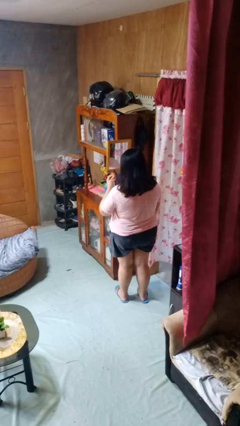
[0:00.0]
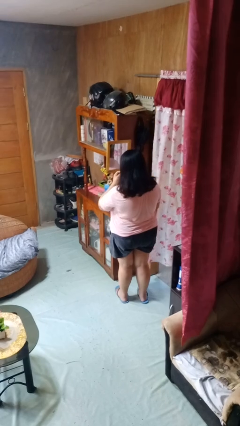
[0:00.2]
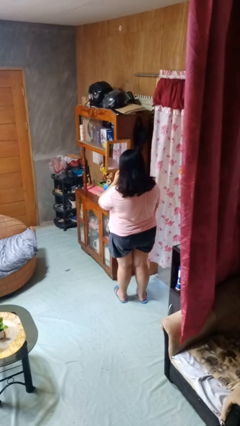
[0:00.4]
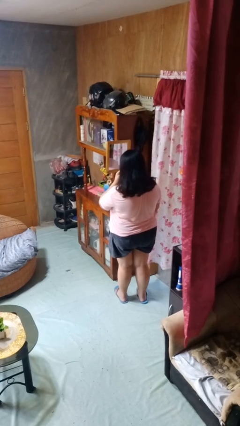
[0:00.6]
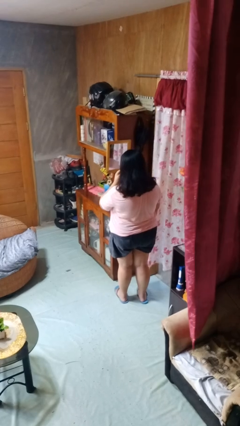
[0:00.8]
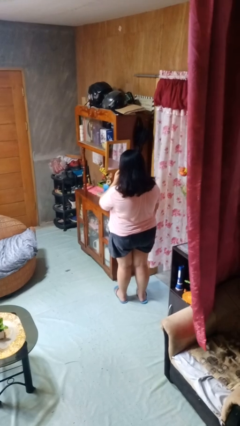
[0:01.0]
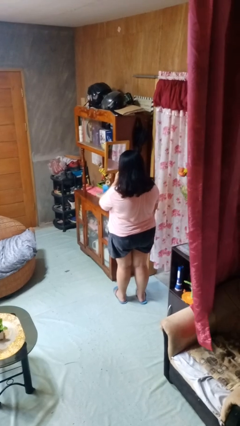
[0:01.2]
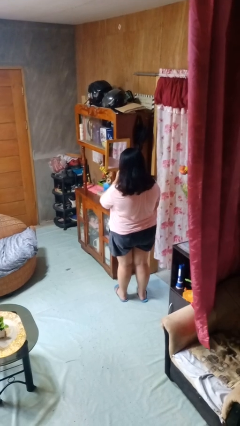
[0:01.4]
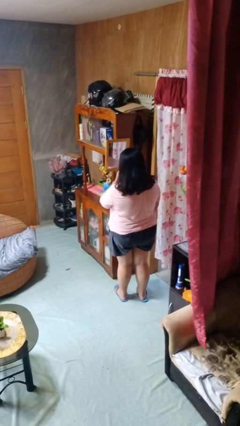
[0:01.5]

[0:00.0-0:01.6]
person applies lip makeup

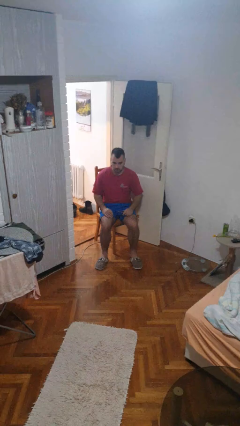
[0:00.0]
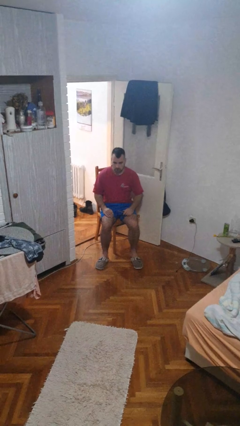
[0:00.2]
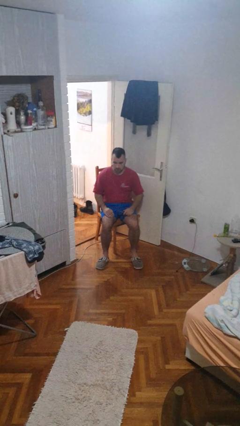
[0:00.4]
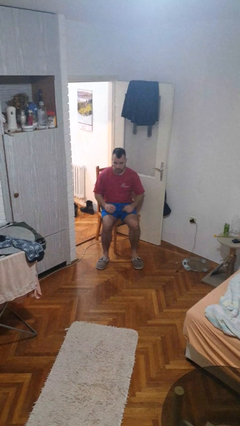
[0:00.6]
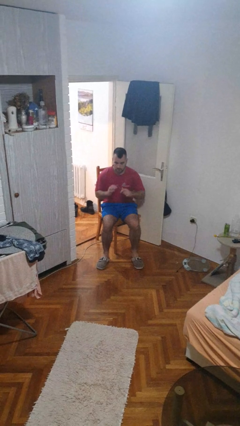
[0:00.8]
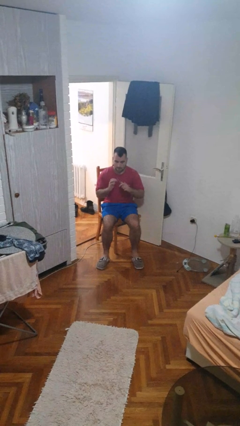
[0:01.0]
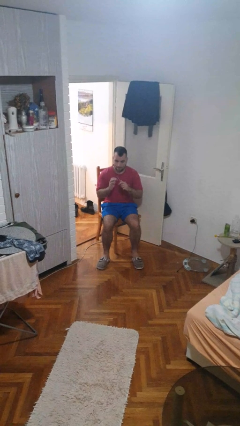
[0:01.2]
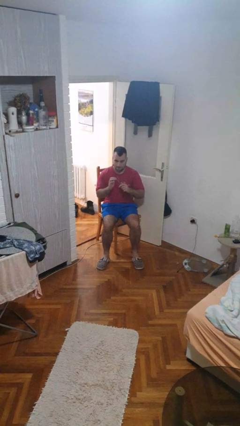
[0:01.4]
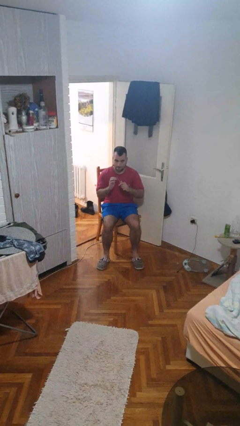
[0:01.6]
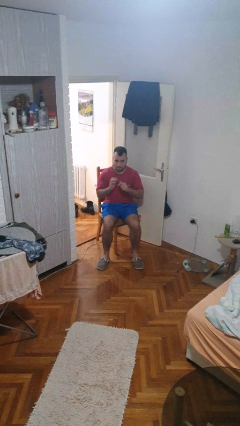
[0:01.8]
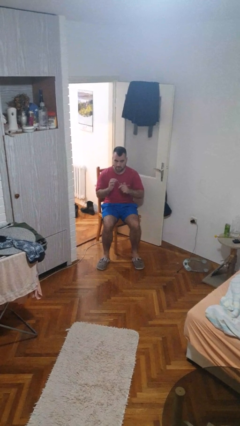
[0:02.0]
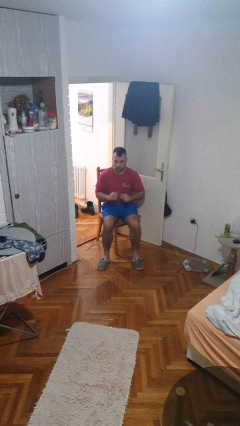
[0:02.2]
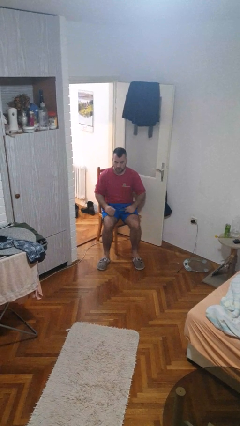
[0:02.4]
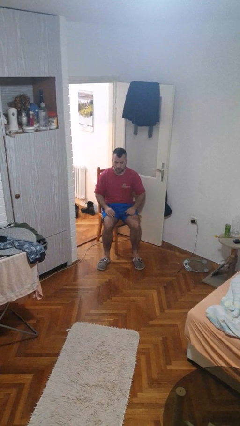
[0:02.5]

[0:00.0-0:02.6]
person files fingernails

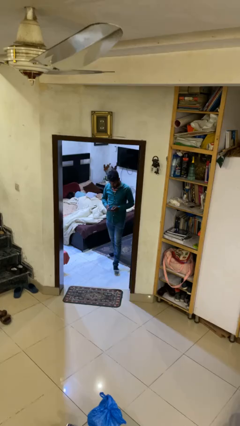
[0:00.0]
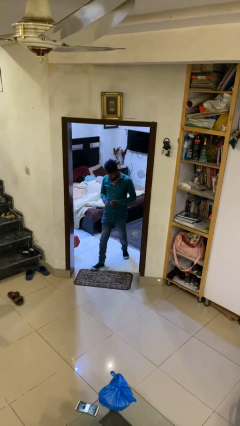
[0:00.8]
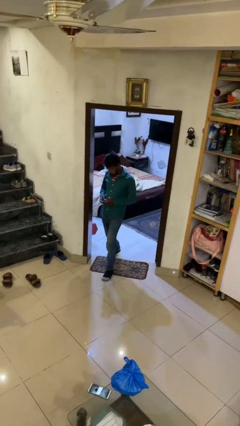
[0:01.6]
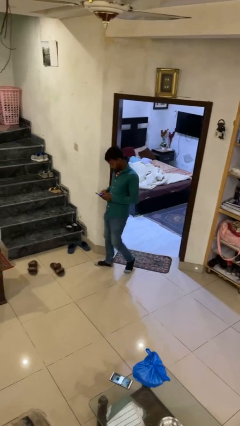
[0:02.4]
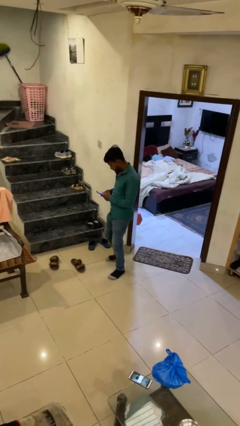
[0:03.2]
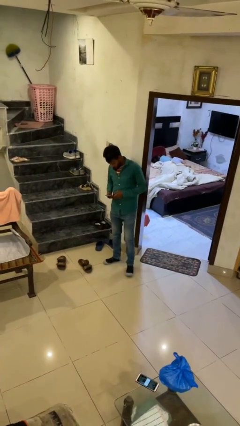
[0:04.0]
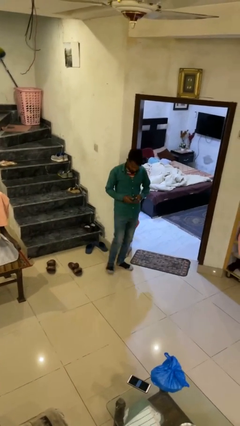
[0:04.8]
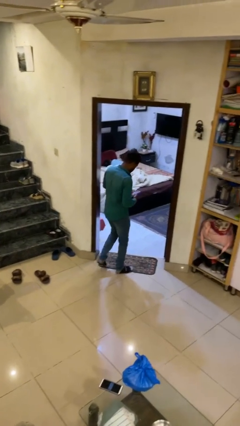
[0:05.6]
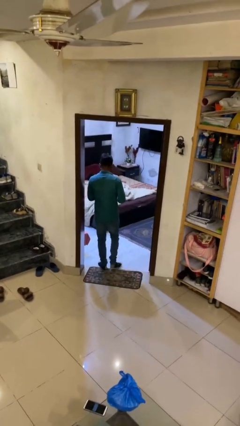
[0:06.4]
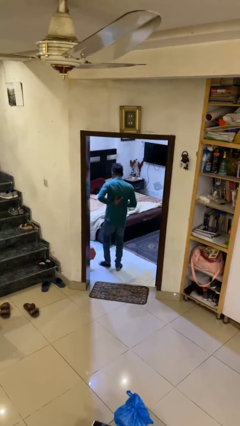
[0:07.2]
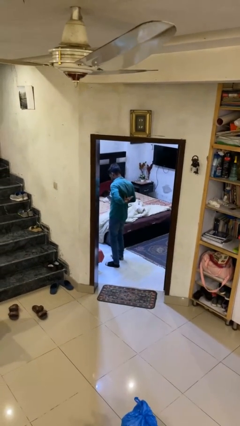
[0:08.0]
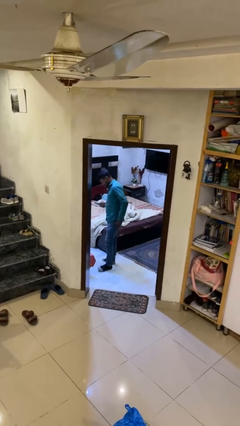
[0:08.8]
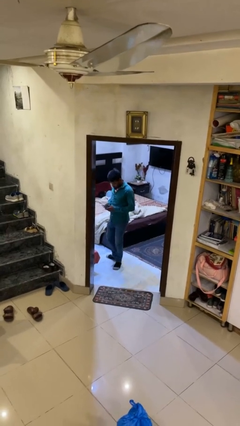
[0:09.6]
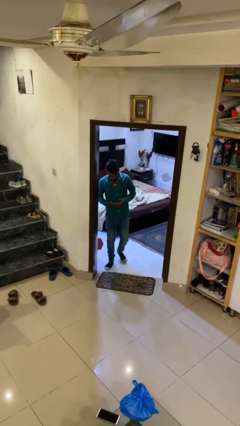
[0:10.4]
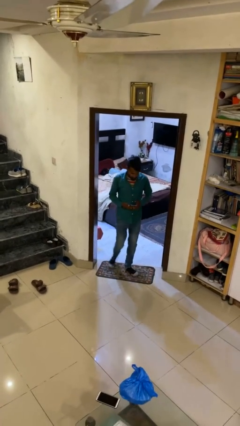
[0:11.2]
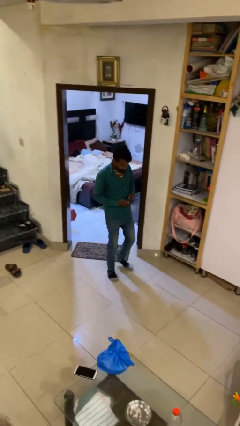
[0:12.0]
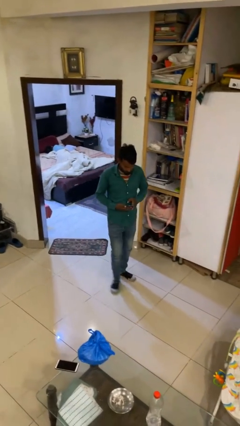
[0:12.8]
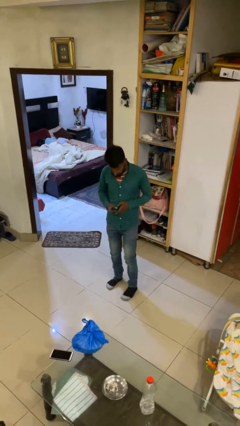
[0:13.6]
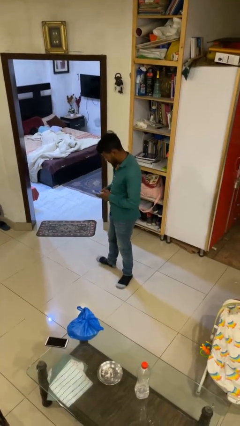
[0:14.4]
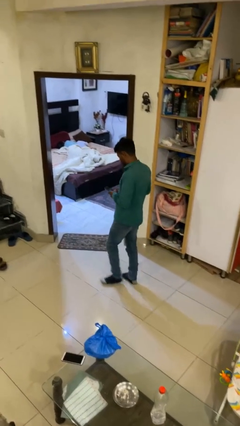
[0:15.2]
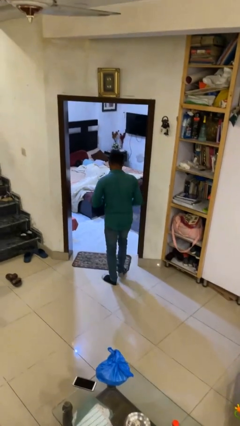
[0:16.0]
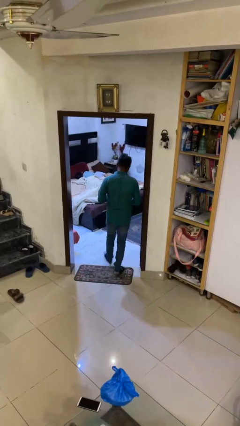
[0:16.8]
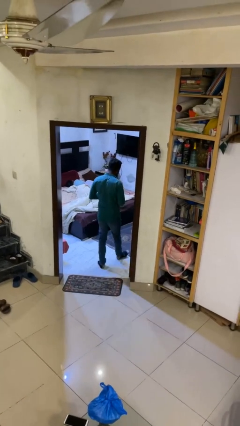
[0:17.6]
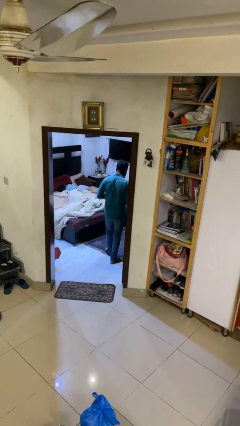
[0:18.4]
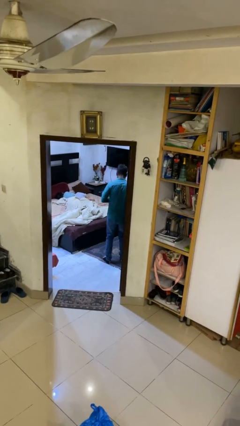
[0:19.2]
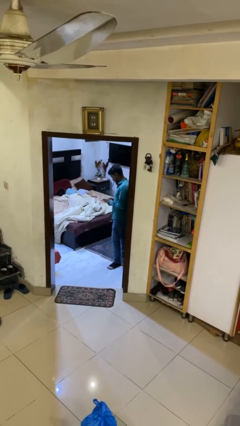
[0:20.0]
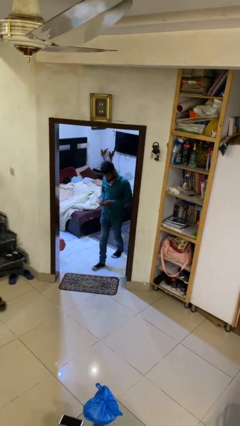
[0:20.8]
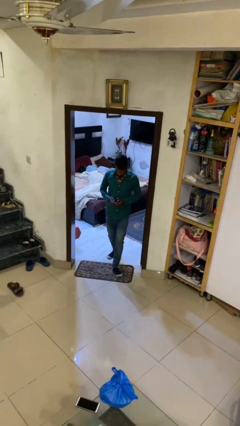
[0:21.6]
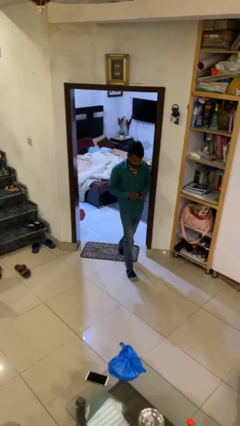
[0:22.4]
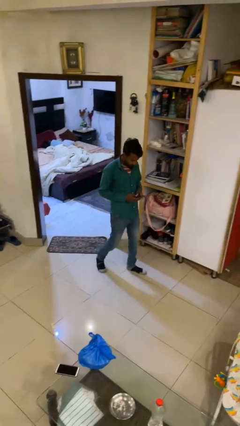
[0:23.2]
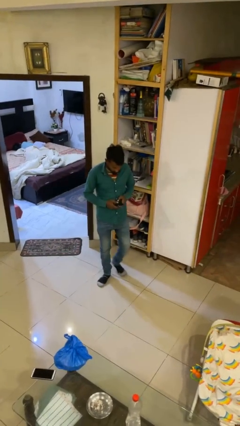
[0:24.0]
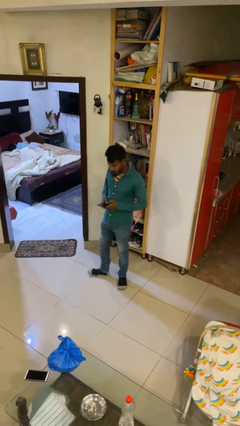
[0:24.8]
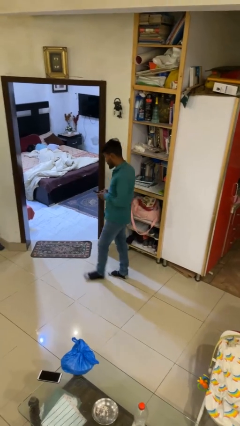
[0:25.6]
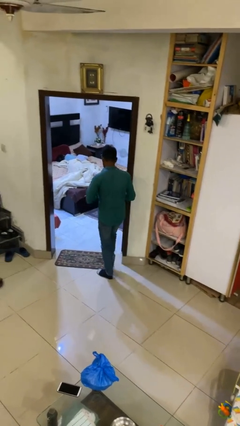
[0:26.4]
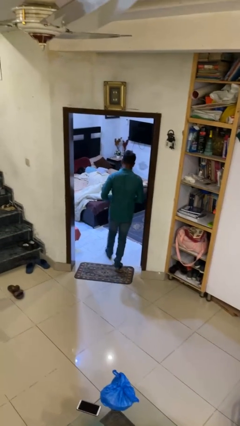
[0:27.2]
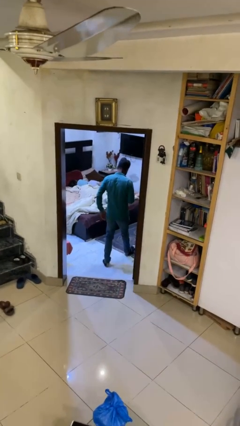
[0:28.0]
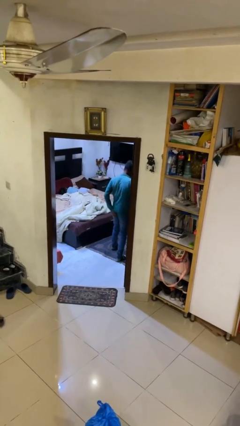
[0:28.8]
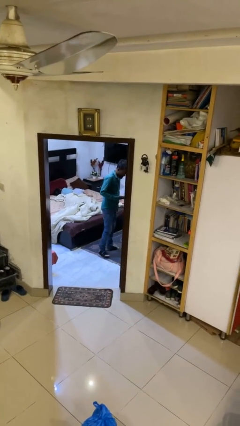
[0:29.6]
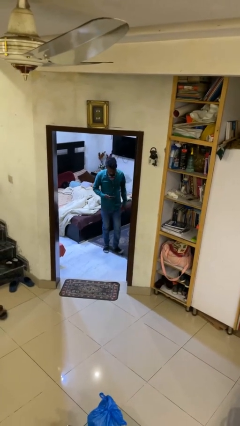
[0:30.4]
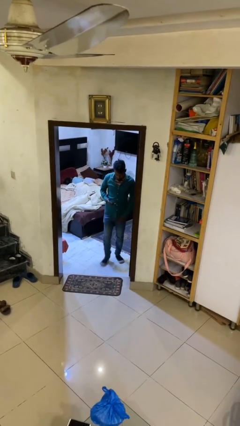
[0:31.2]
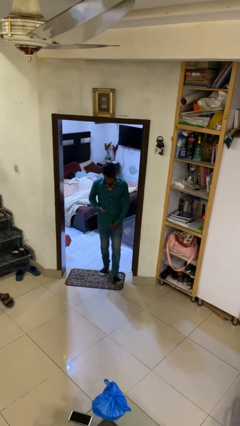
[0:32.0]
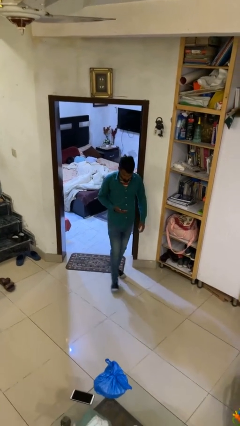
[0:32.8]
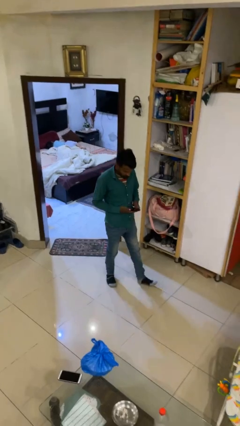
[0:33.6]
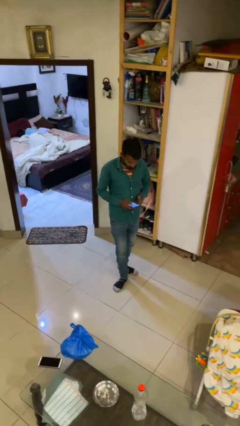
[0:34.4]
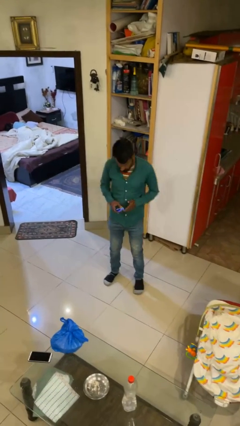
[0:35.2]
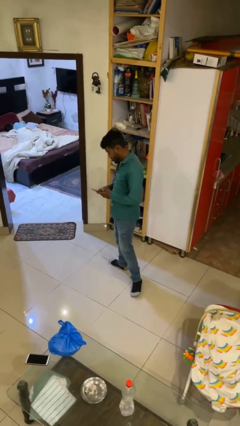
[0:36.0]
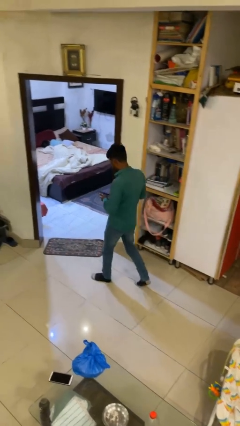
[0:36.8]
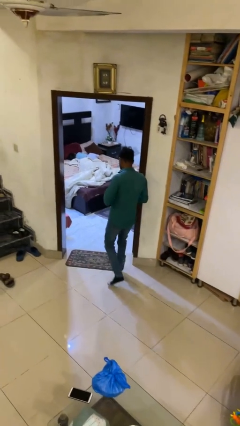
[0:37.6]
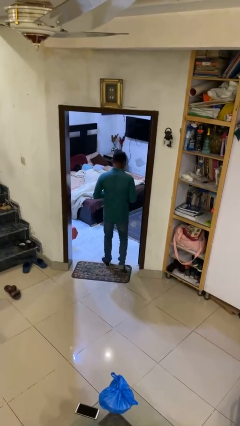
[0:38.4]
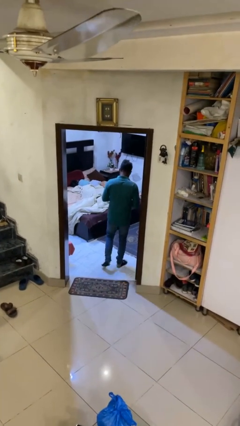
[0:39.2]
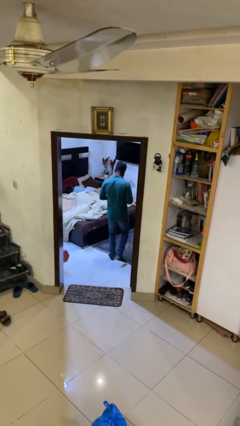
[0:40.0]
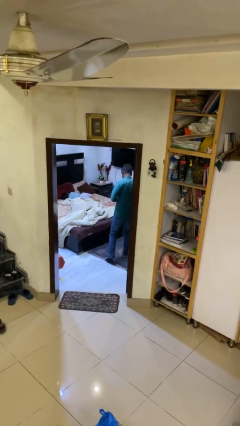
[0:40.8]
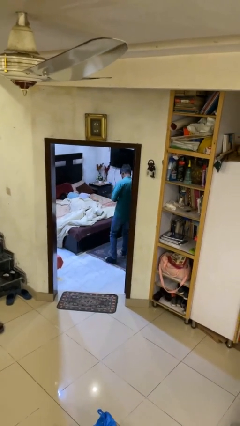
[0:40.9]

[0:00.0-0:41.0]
person texts on phone

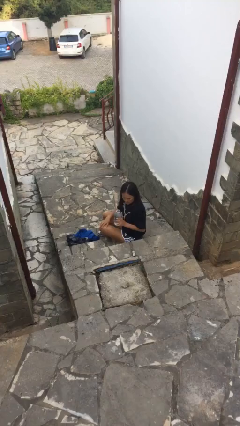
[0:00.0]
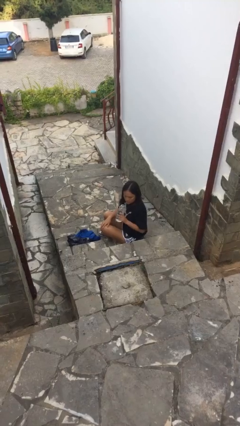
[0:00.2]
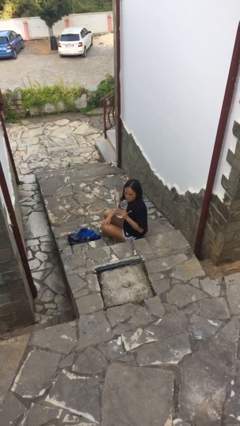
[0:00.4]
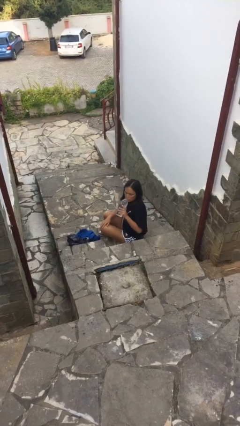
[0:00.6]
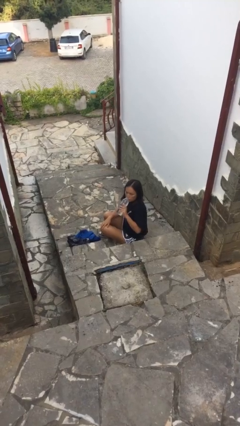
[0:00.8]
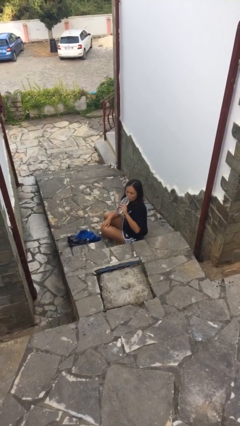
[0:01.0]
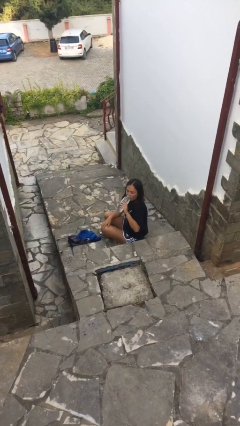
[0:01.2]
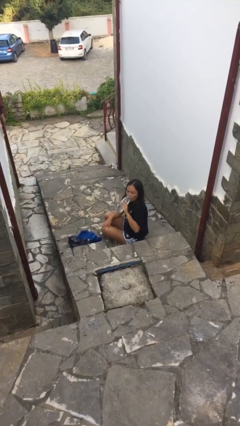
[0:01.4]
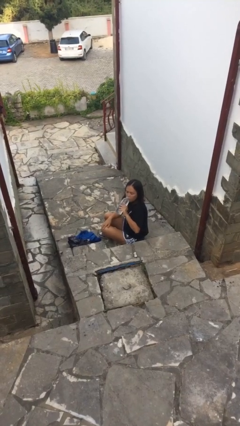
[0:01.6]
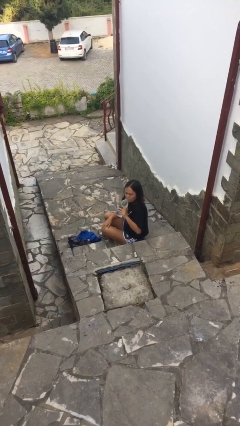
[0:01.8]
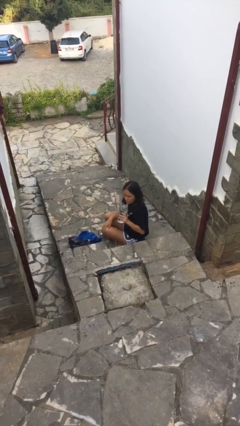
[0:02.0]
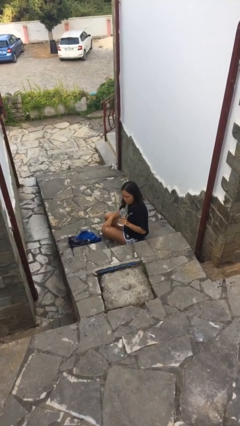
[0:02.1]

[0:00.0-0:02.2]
person drinks from bottle

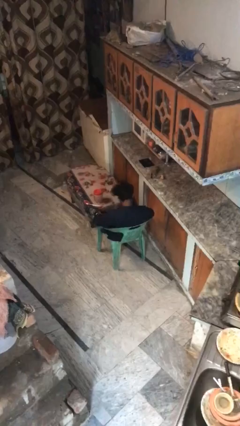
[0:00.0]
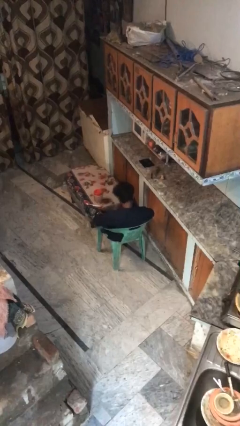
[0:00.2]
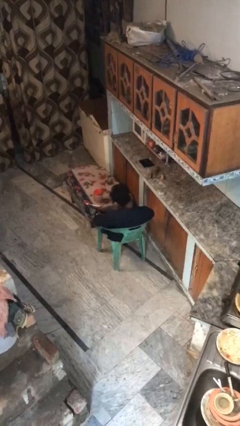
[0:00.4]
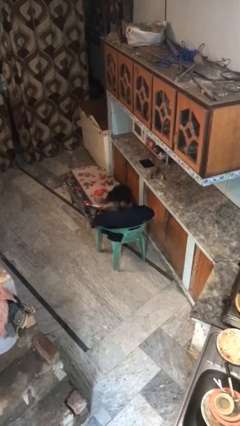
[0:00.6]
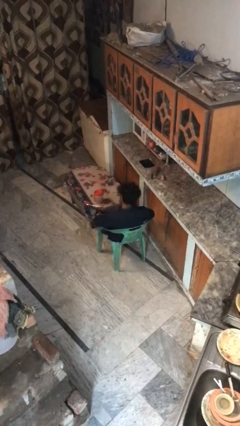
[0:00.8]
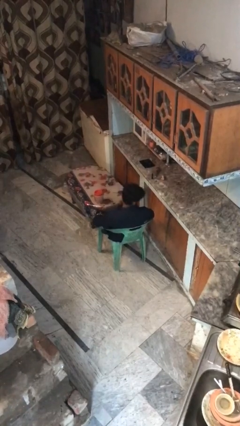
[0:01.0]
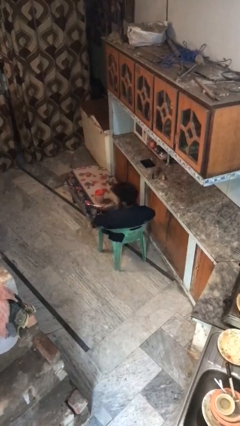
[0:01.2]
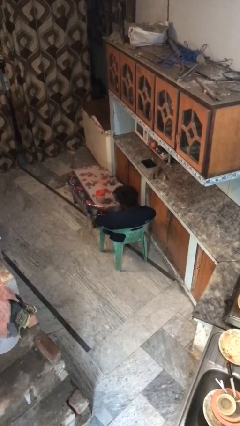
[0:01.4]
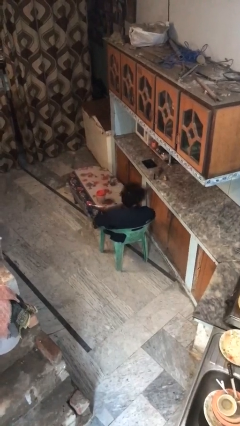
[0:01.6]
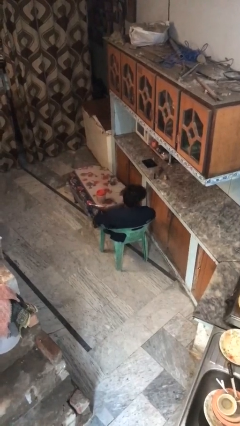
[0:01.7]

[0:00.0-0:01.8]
person shakes head
